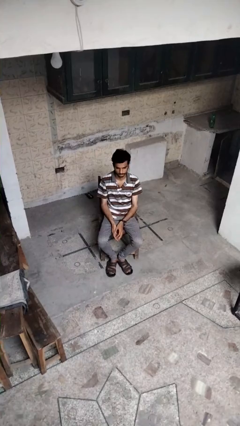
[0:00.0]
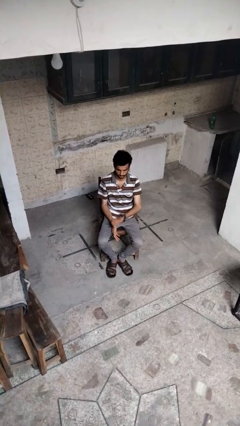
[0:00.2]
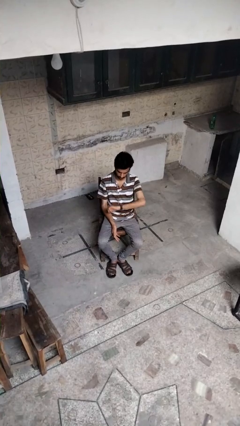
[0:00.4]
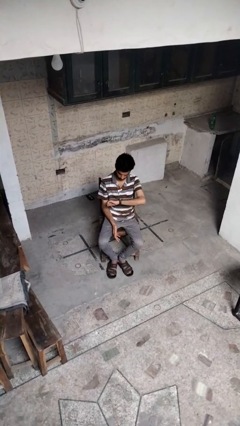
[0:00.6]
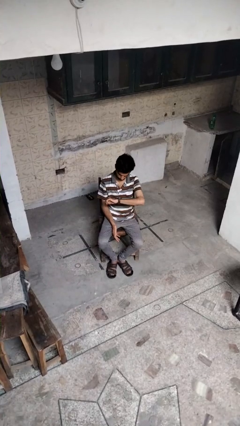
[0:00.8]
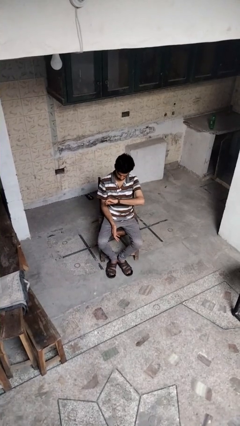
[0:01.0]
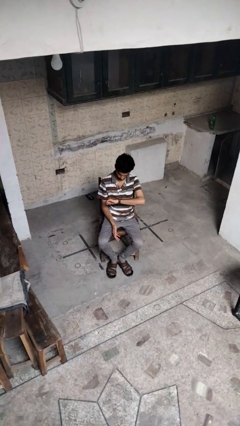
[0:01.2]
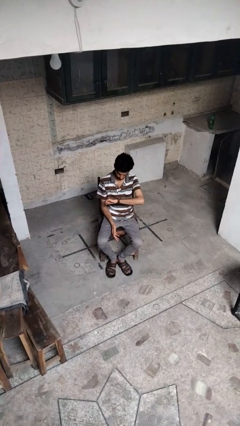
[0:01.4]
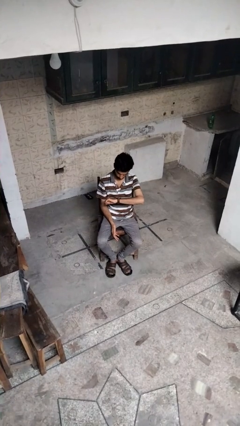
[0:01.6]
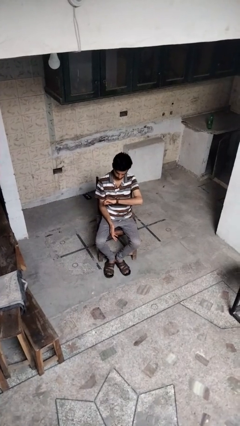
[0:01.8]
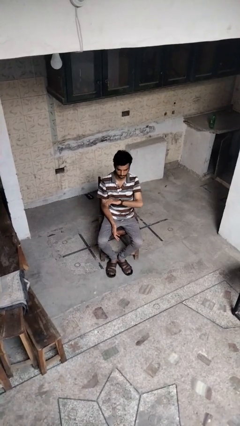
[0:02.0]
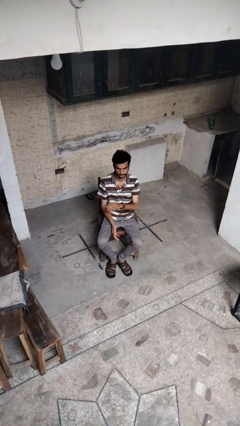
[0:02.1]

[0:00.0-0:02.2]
person looks at wristwatch

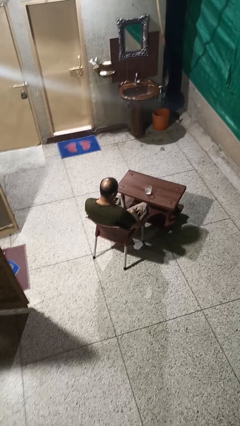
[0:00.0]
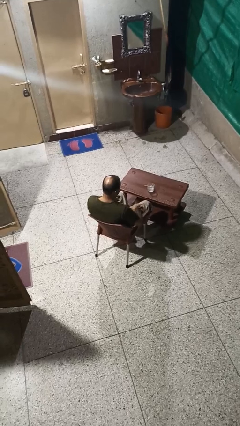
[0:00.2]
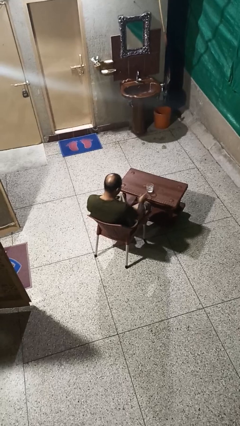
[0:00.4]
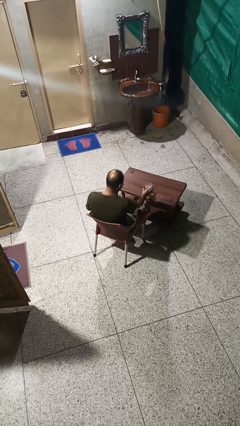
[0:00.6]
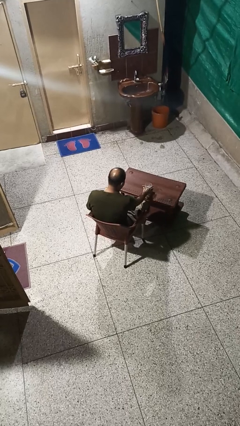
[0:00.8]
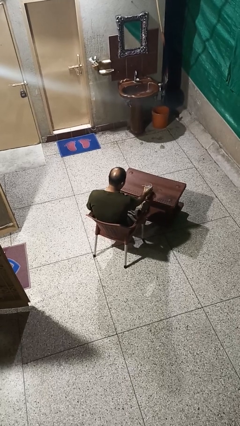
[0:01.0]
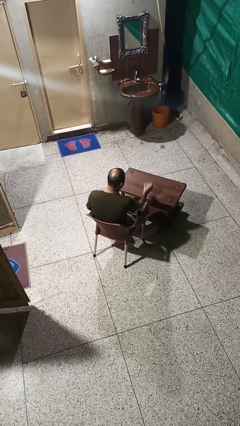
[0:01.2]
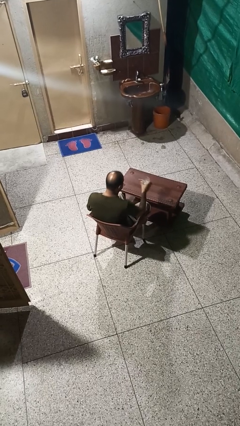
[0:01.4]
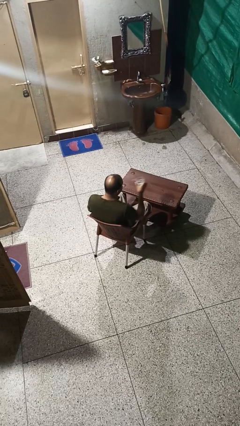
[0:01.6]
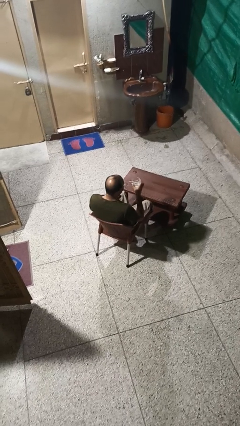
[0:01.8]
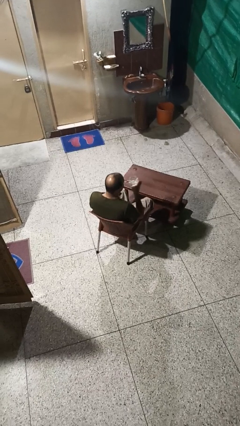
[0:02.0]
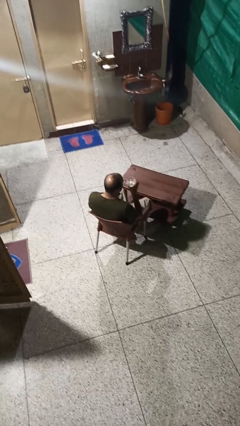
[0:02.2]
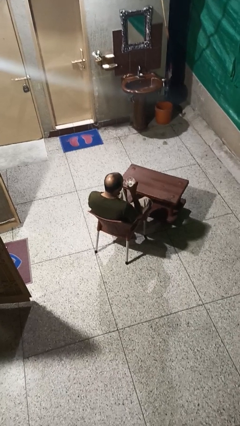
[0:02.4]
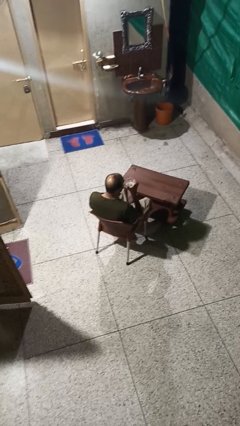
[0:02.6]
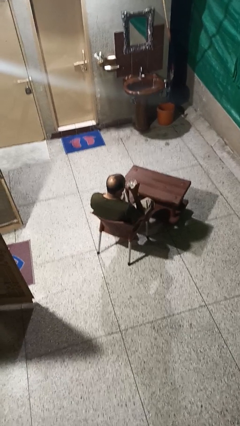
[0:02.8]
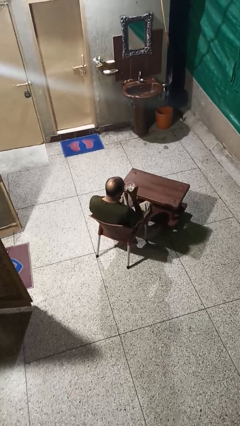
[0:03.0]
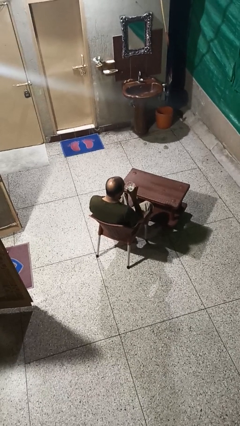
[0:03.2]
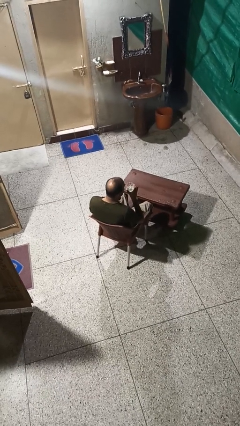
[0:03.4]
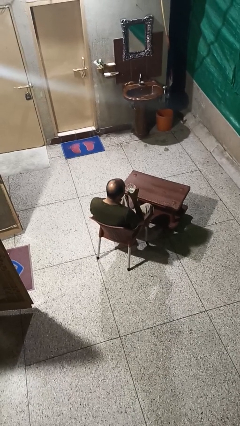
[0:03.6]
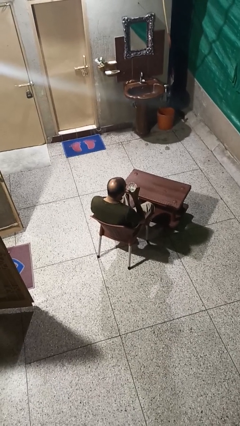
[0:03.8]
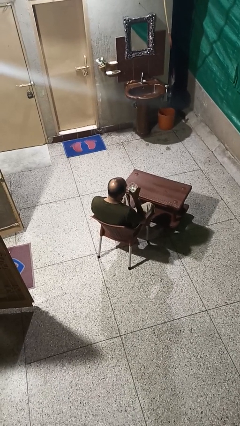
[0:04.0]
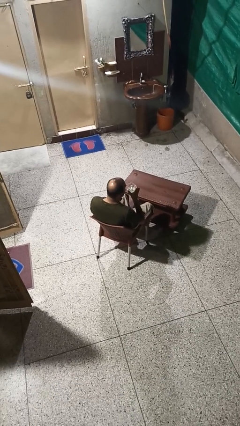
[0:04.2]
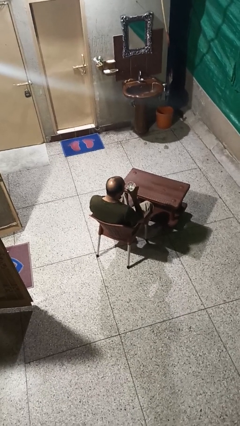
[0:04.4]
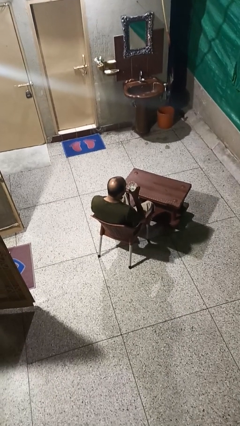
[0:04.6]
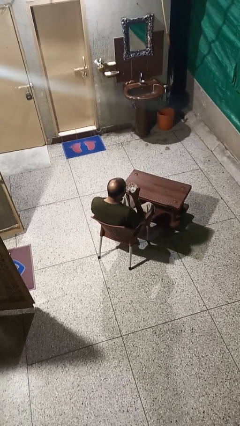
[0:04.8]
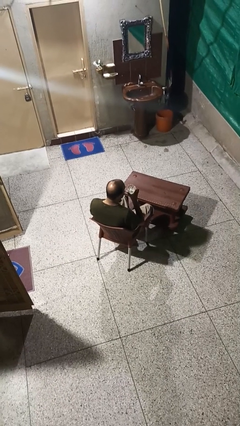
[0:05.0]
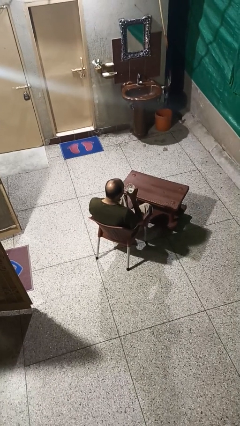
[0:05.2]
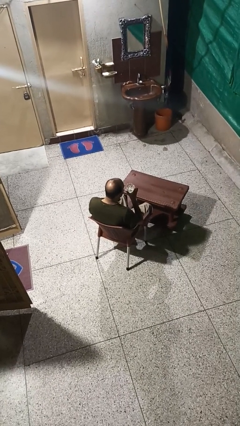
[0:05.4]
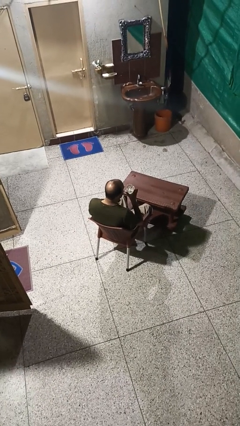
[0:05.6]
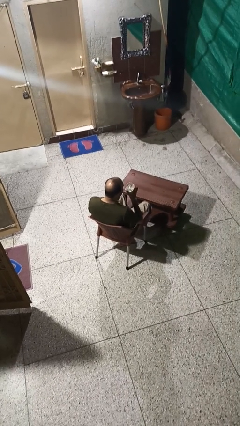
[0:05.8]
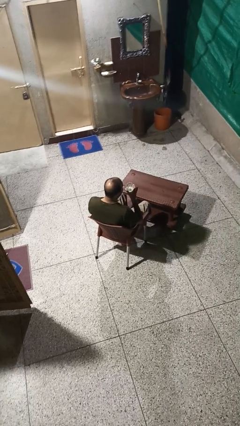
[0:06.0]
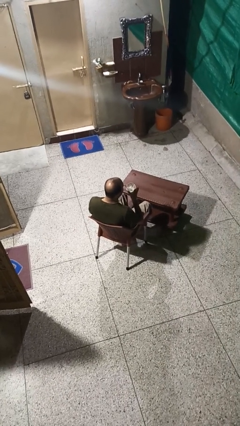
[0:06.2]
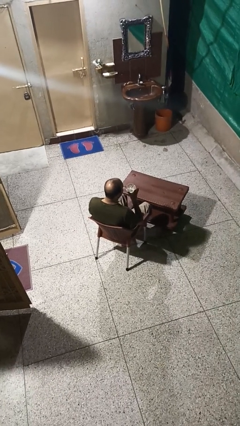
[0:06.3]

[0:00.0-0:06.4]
person drinks from straw

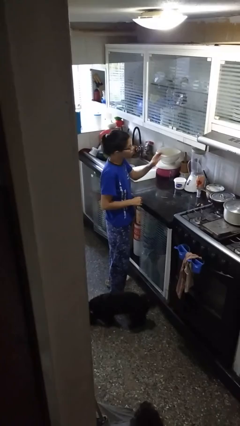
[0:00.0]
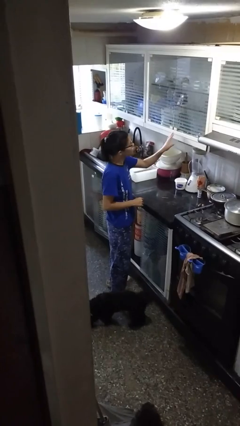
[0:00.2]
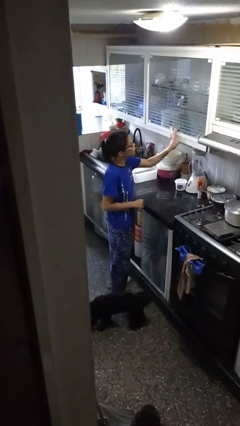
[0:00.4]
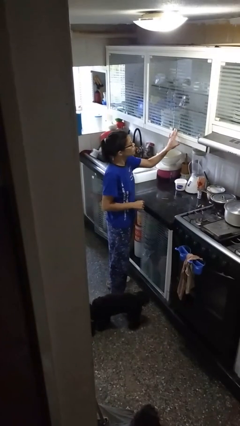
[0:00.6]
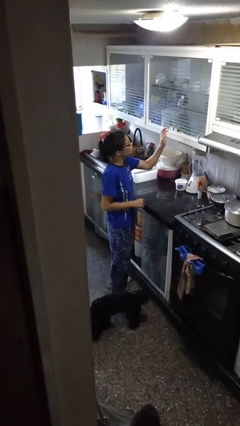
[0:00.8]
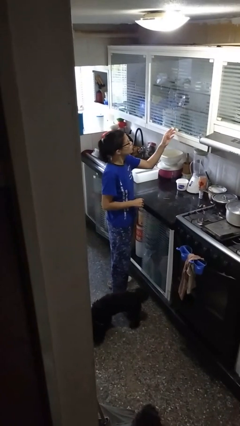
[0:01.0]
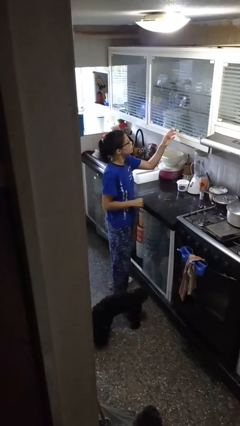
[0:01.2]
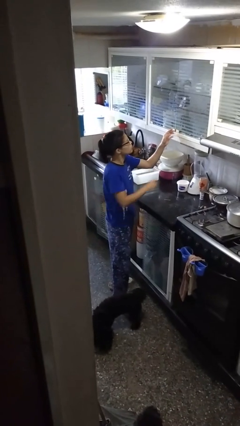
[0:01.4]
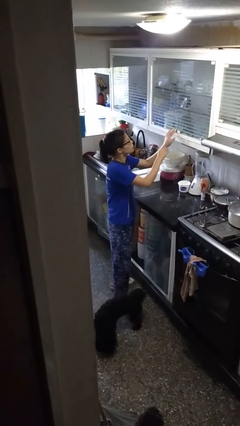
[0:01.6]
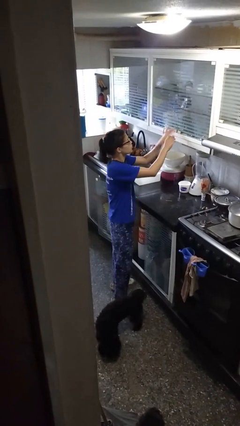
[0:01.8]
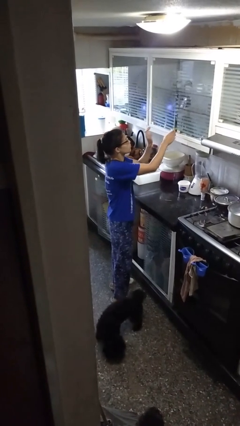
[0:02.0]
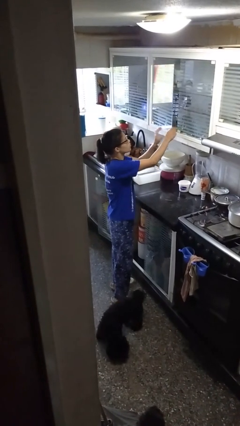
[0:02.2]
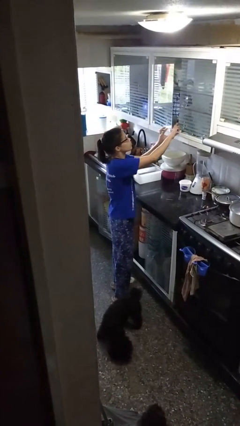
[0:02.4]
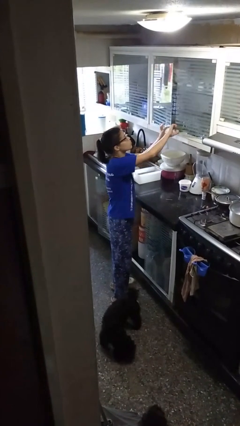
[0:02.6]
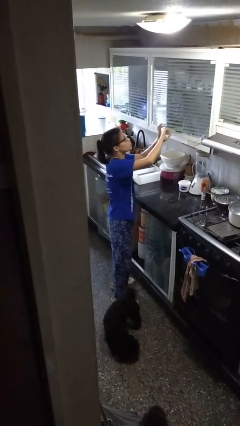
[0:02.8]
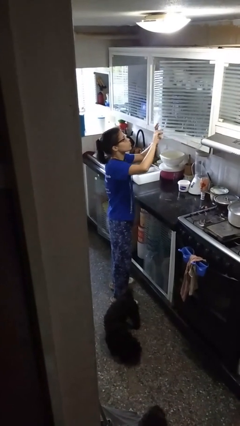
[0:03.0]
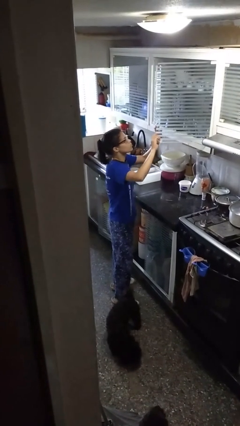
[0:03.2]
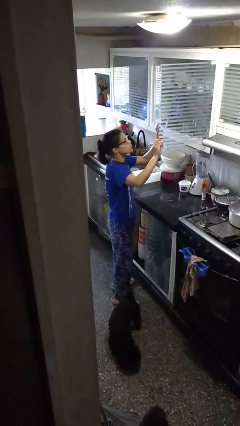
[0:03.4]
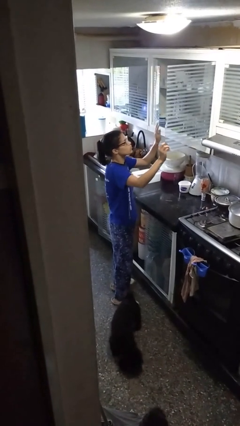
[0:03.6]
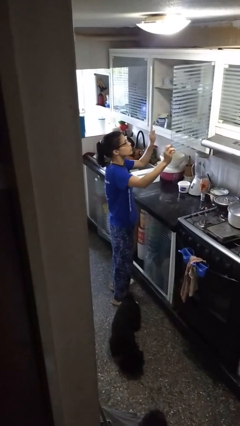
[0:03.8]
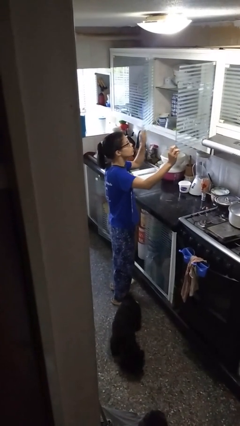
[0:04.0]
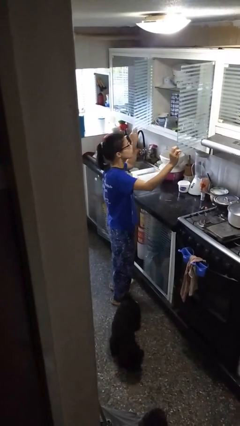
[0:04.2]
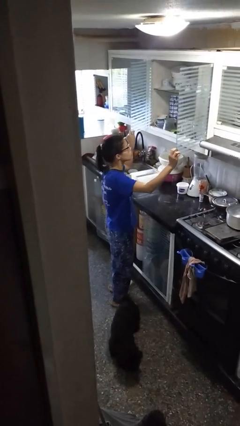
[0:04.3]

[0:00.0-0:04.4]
person opens cabinet

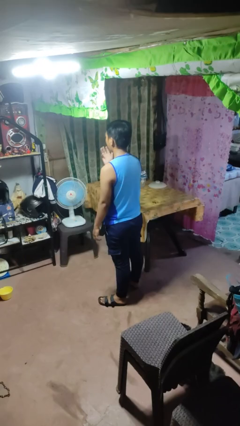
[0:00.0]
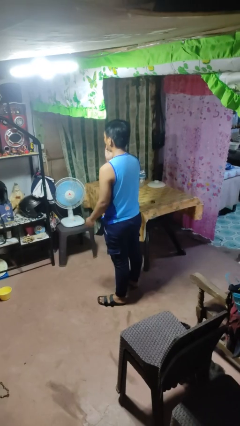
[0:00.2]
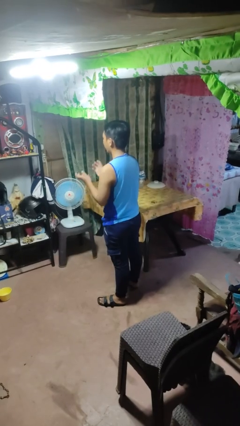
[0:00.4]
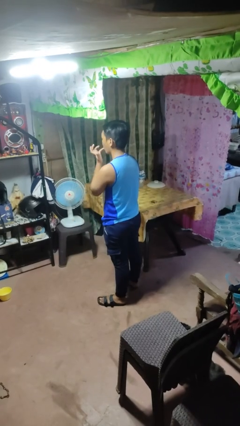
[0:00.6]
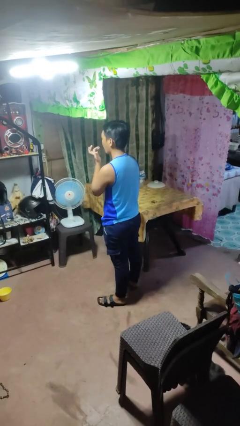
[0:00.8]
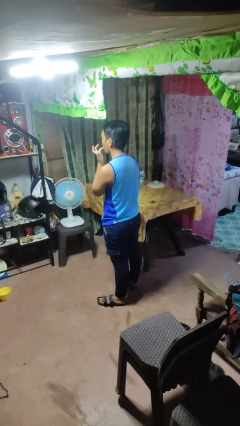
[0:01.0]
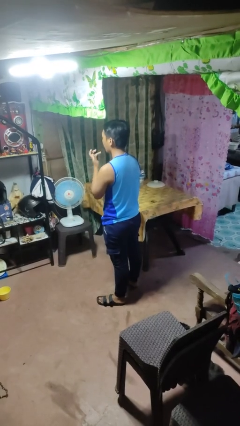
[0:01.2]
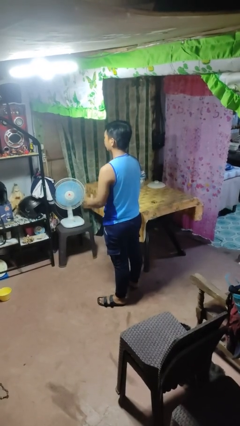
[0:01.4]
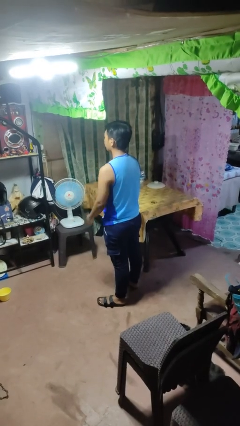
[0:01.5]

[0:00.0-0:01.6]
person licks fingers

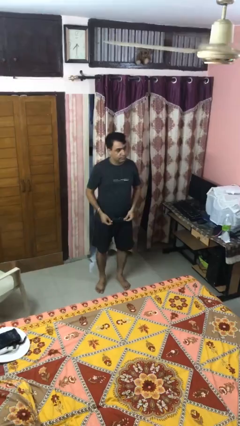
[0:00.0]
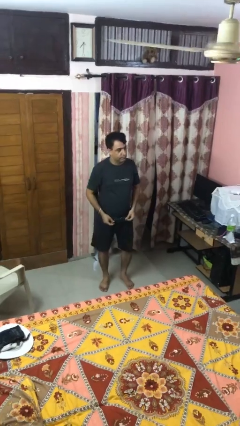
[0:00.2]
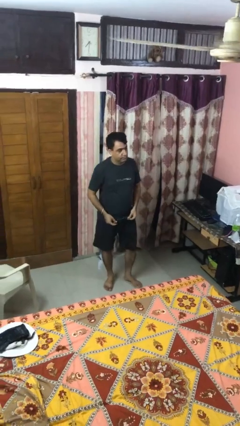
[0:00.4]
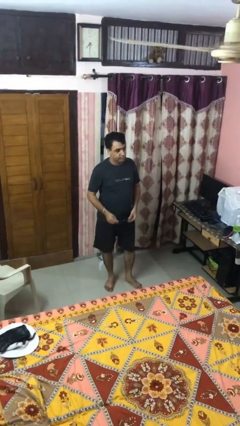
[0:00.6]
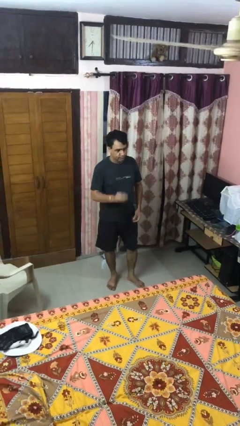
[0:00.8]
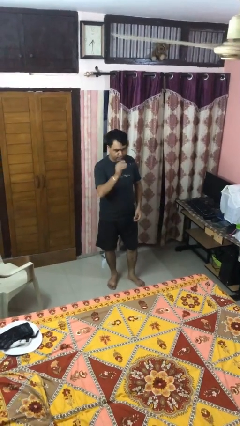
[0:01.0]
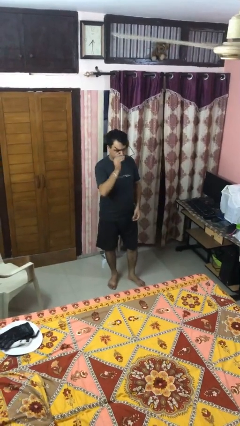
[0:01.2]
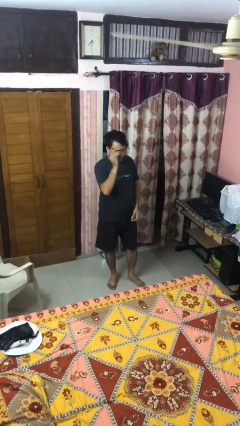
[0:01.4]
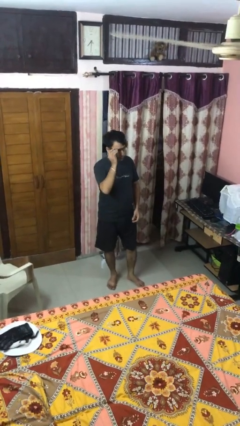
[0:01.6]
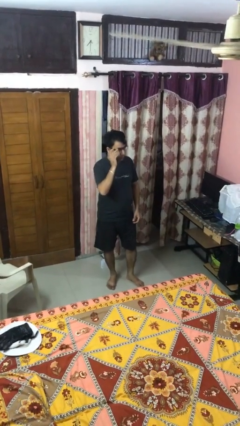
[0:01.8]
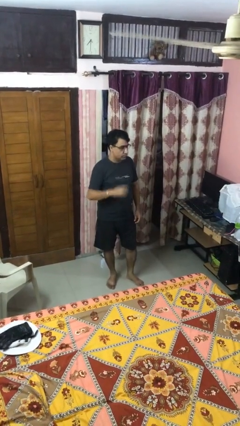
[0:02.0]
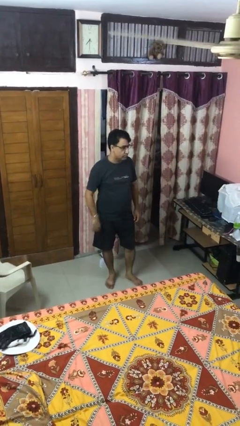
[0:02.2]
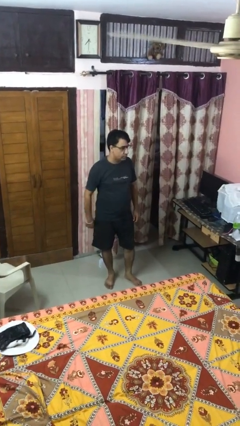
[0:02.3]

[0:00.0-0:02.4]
person puts on glasses

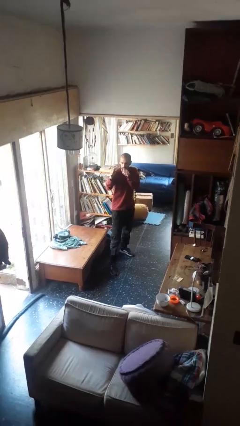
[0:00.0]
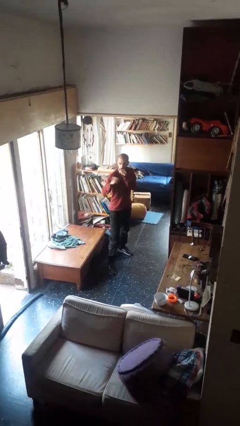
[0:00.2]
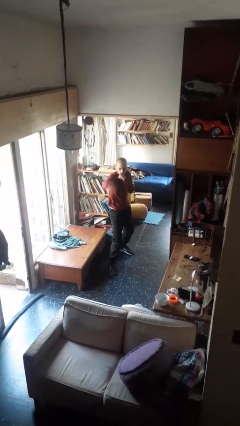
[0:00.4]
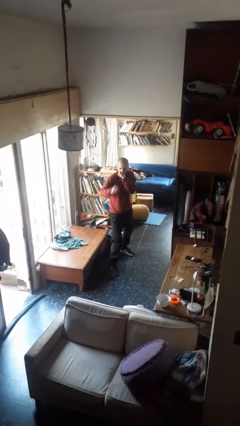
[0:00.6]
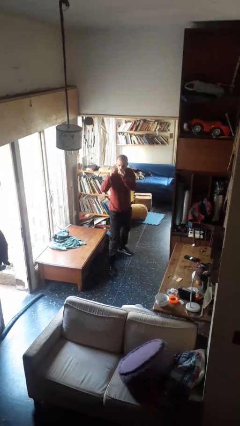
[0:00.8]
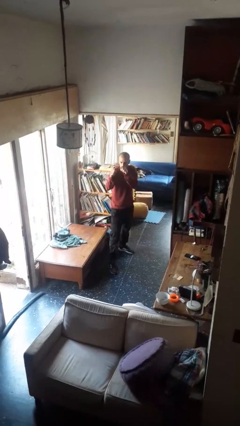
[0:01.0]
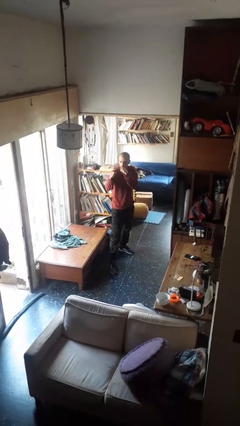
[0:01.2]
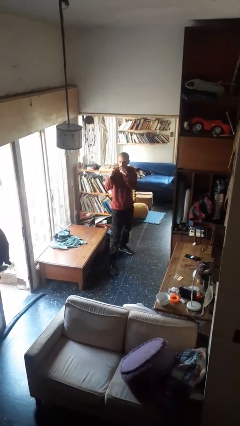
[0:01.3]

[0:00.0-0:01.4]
person punches
